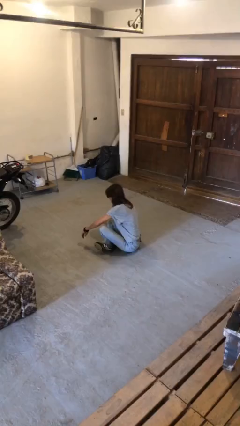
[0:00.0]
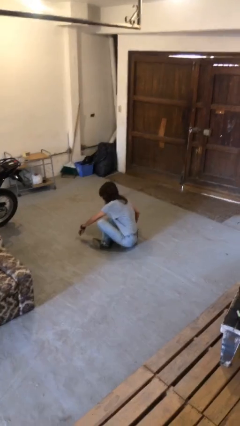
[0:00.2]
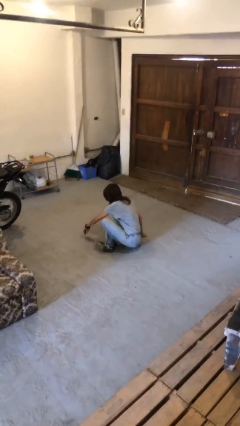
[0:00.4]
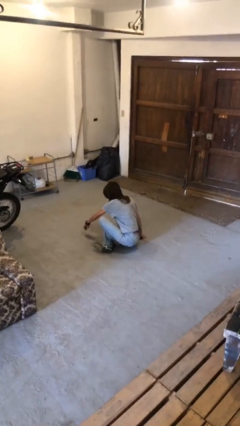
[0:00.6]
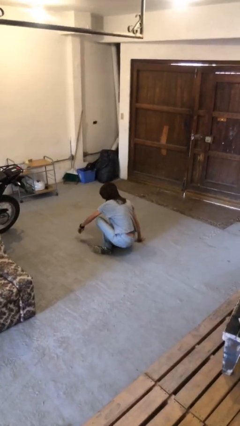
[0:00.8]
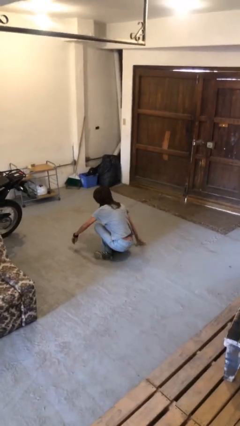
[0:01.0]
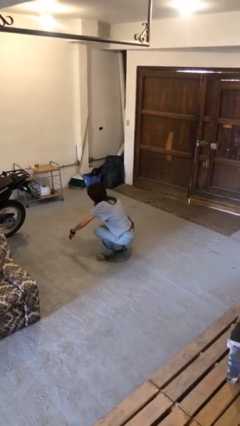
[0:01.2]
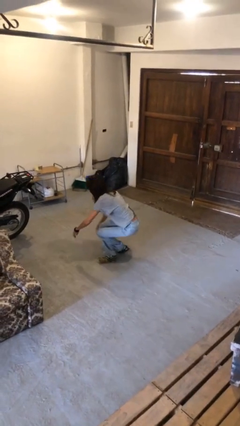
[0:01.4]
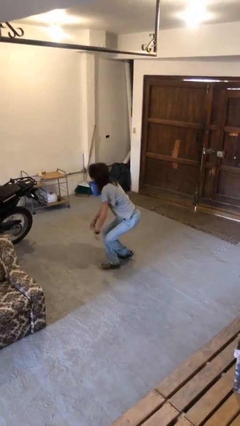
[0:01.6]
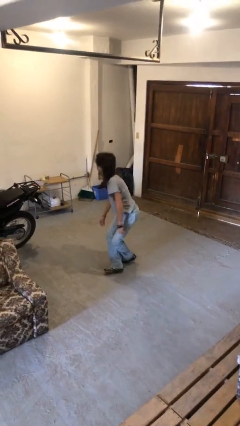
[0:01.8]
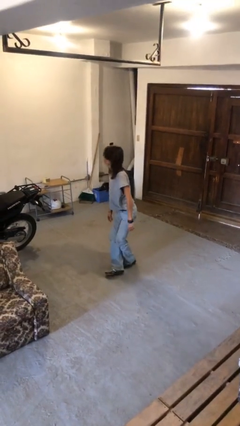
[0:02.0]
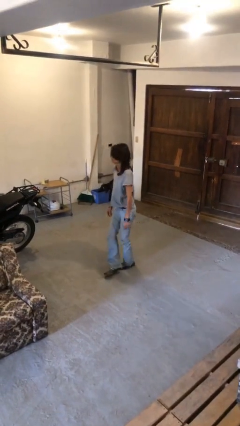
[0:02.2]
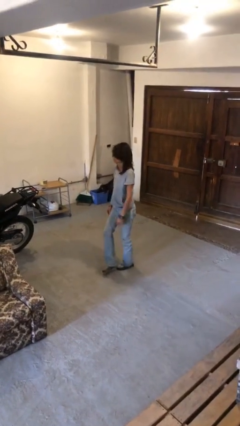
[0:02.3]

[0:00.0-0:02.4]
person stands up from floor

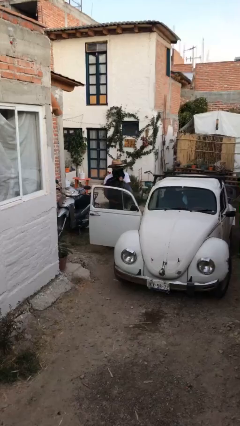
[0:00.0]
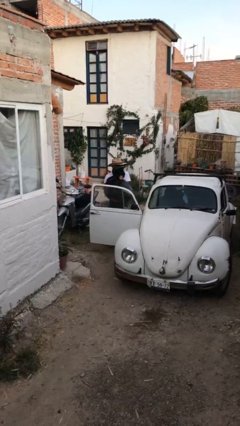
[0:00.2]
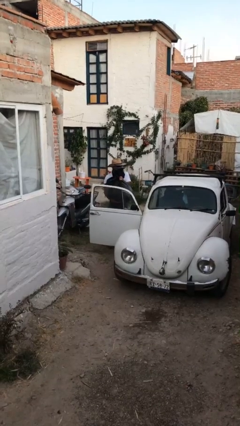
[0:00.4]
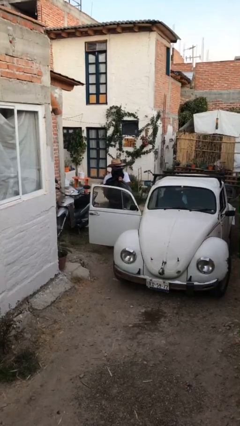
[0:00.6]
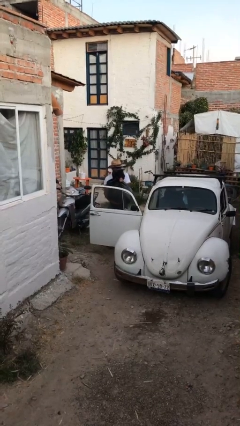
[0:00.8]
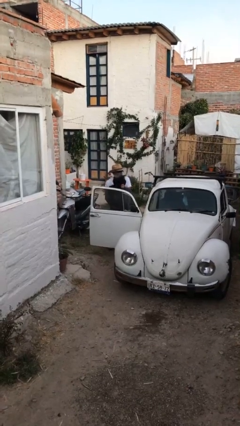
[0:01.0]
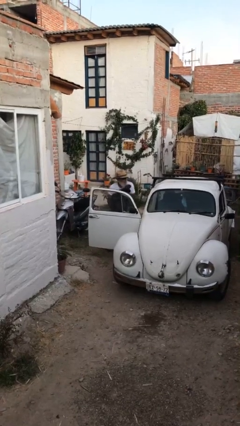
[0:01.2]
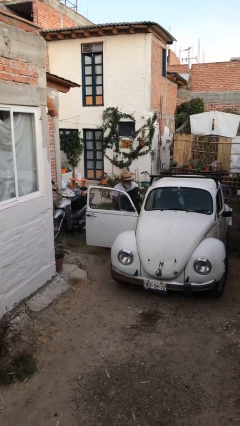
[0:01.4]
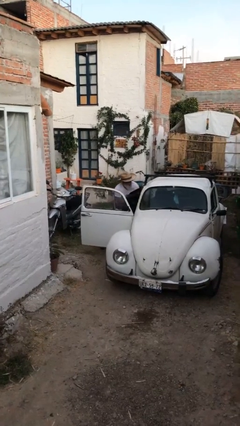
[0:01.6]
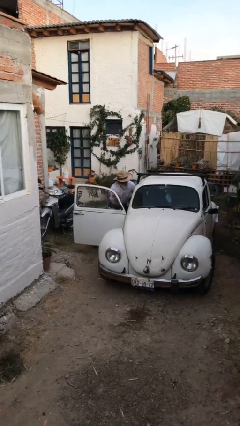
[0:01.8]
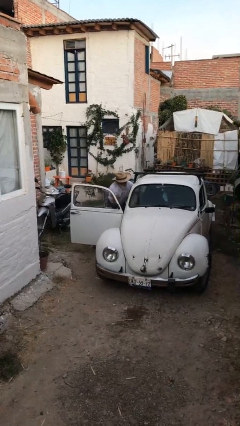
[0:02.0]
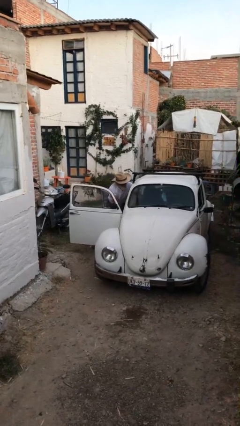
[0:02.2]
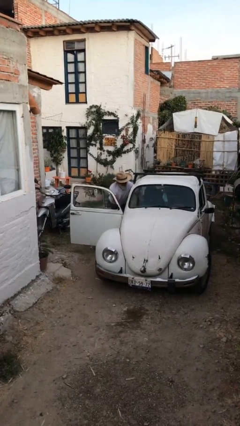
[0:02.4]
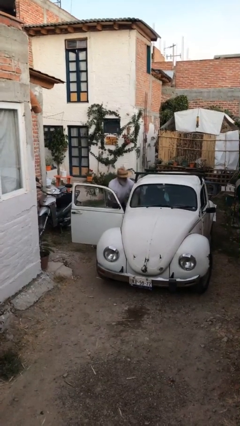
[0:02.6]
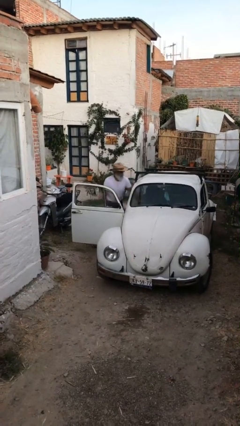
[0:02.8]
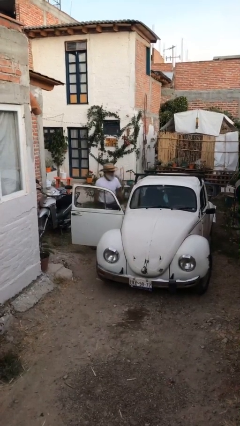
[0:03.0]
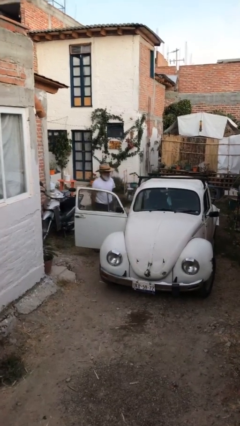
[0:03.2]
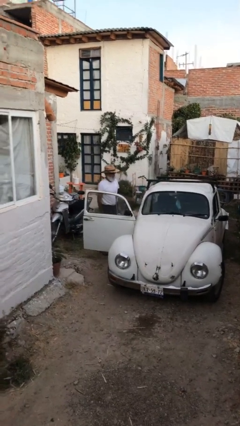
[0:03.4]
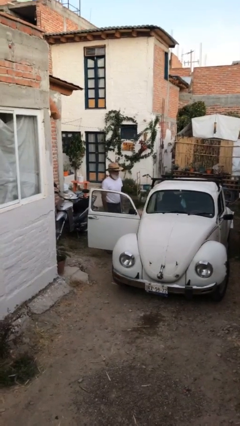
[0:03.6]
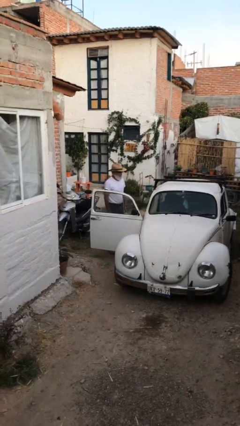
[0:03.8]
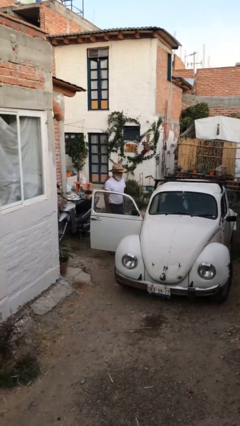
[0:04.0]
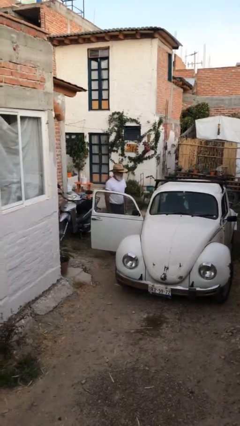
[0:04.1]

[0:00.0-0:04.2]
person loads car

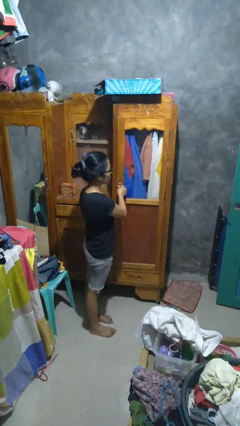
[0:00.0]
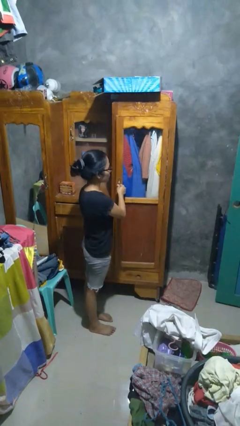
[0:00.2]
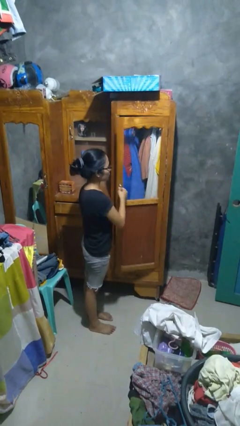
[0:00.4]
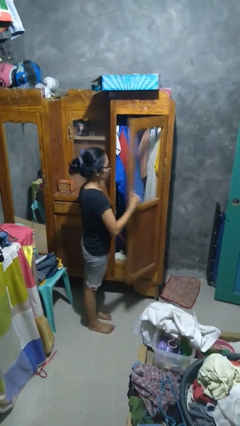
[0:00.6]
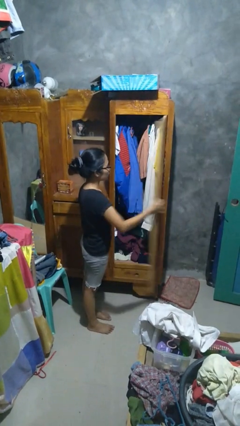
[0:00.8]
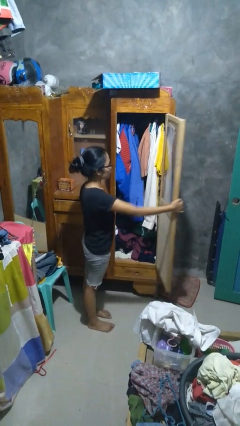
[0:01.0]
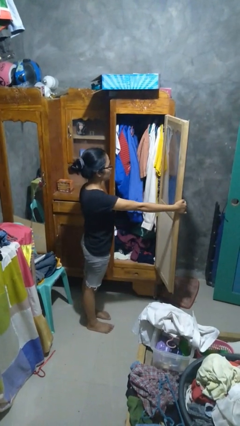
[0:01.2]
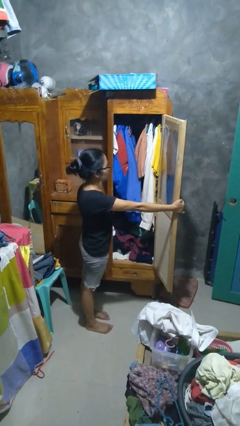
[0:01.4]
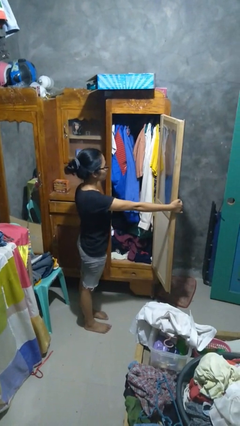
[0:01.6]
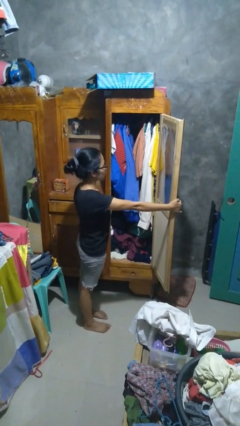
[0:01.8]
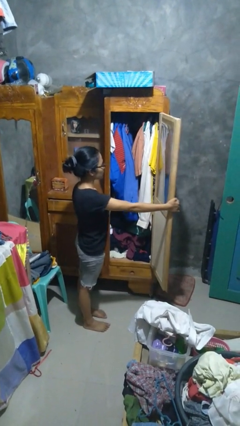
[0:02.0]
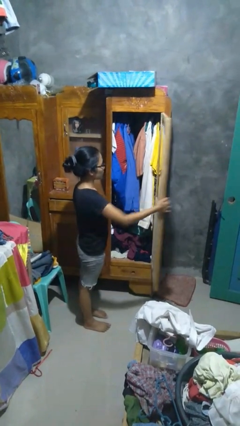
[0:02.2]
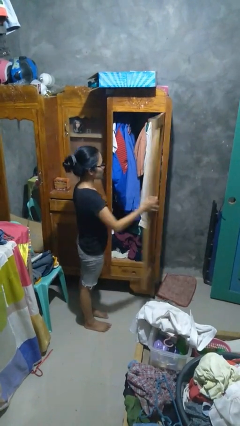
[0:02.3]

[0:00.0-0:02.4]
person opens closet door

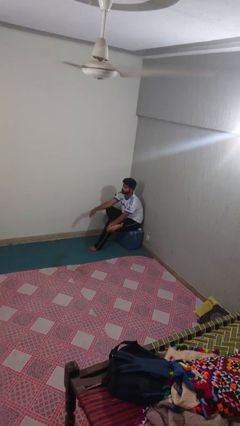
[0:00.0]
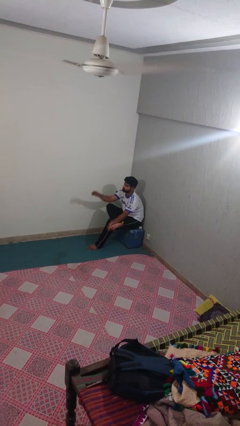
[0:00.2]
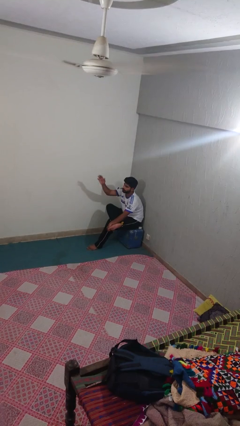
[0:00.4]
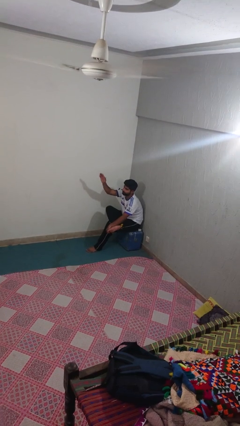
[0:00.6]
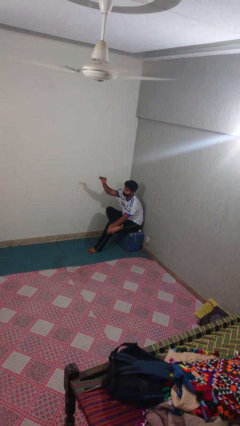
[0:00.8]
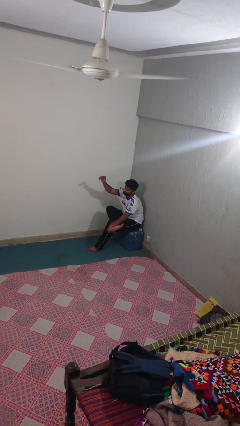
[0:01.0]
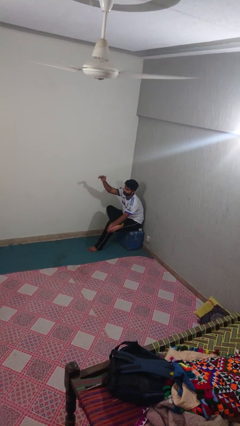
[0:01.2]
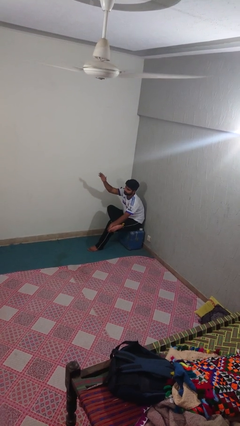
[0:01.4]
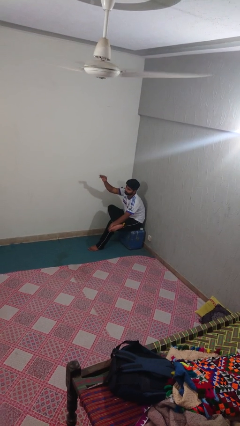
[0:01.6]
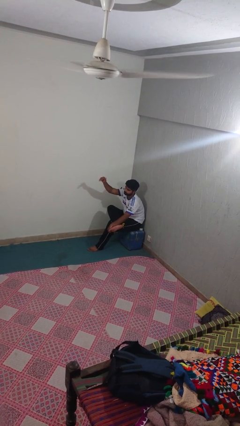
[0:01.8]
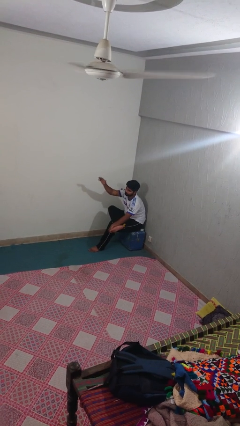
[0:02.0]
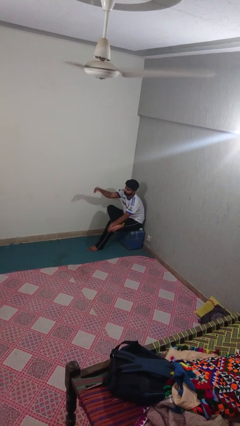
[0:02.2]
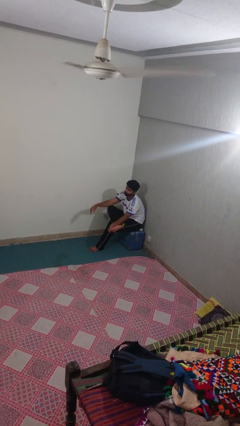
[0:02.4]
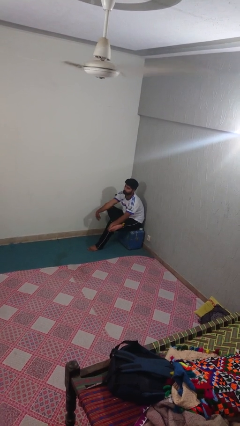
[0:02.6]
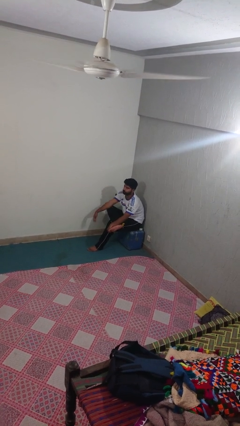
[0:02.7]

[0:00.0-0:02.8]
person gestures come here

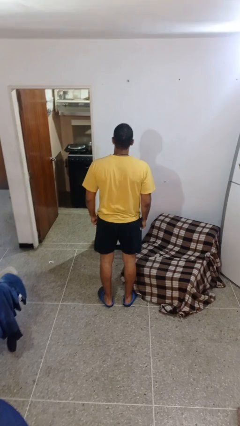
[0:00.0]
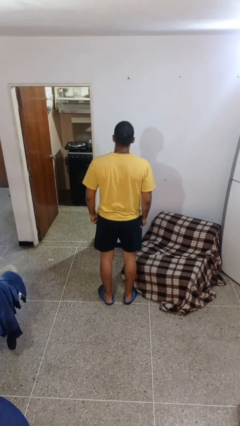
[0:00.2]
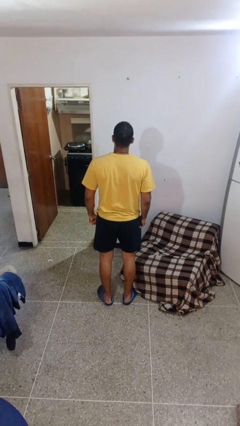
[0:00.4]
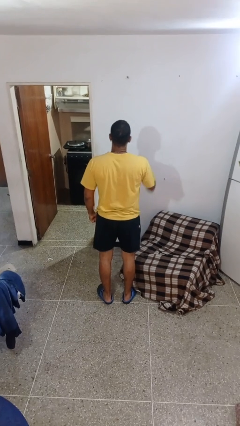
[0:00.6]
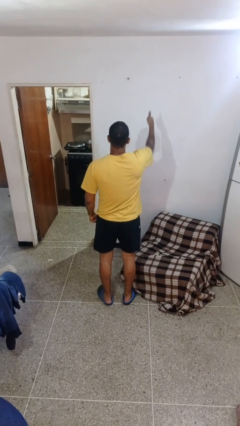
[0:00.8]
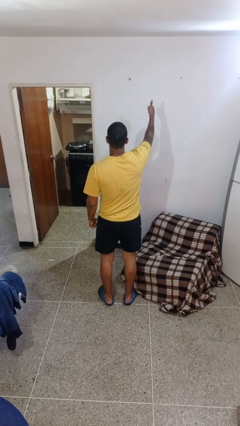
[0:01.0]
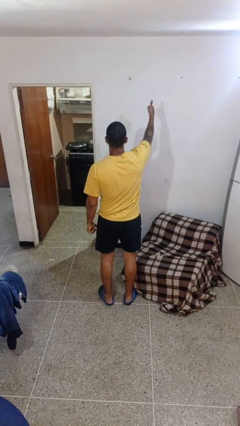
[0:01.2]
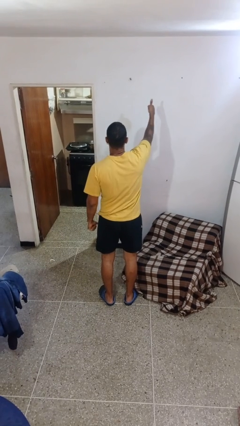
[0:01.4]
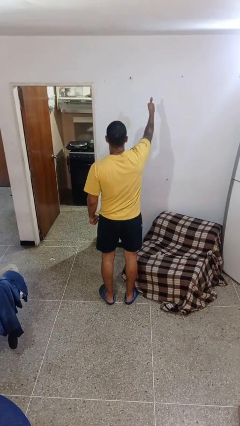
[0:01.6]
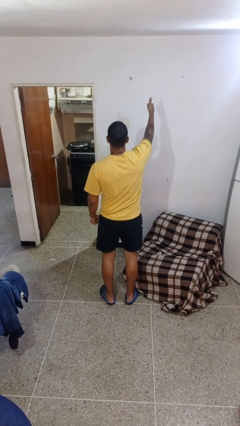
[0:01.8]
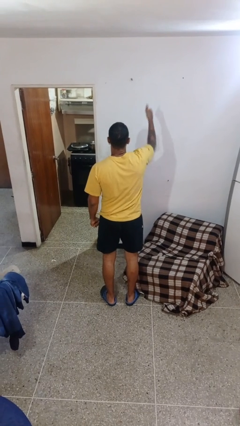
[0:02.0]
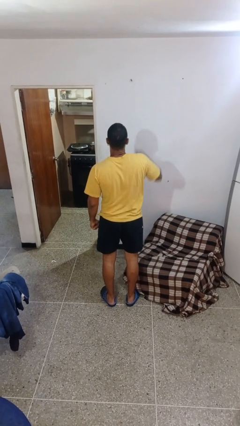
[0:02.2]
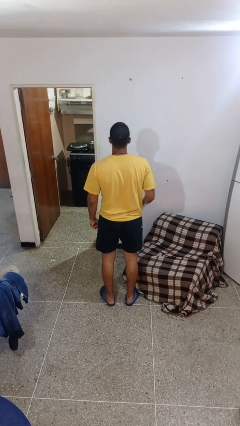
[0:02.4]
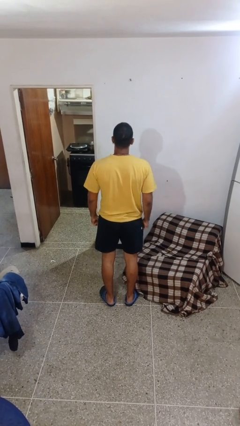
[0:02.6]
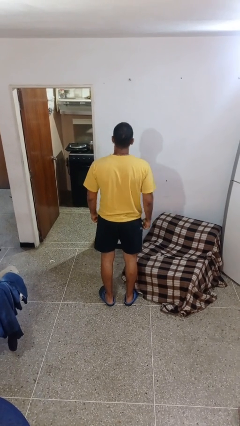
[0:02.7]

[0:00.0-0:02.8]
person gestures thumbs up

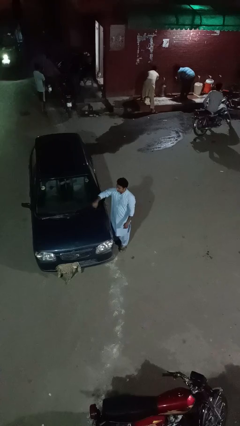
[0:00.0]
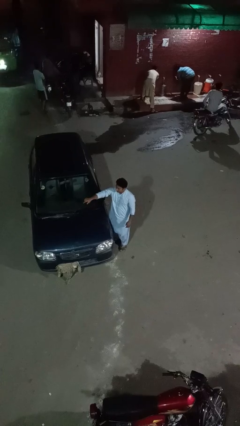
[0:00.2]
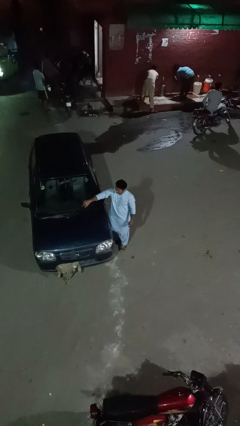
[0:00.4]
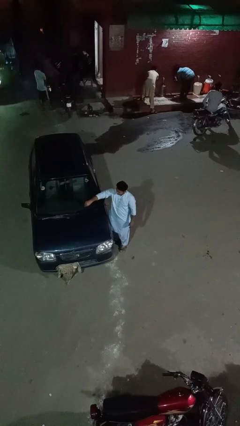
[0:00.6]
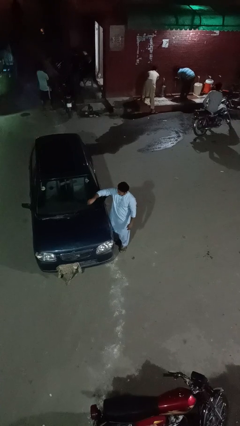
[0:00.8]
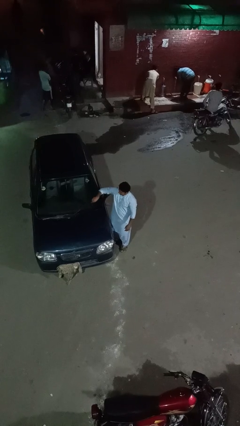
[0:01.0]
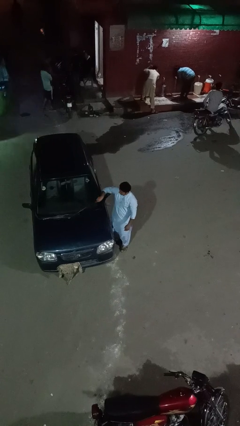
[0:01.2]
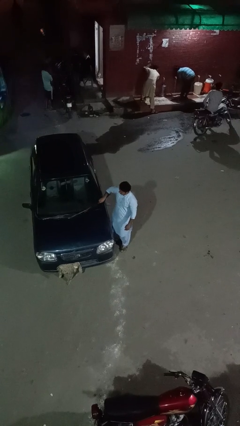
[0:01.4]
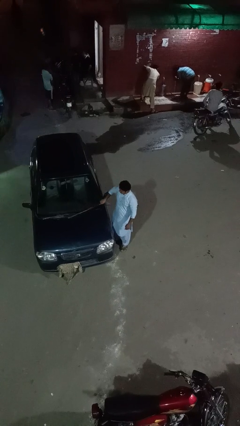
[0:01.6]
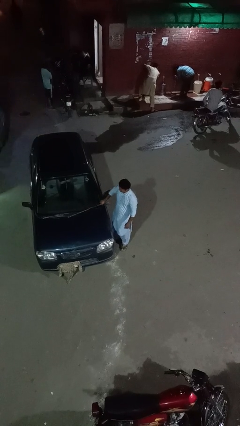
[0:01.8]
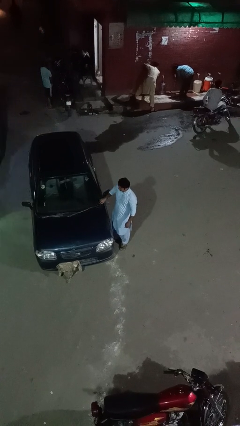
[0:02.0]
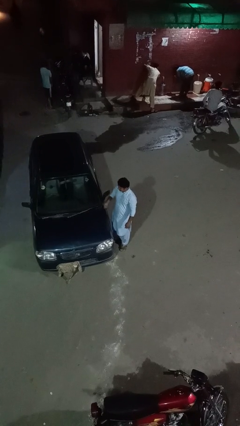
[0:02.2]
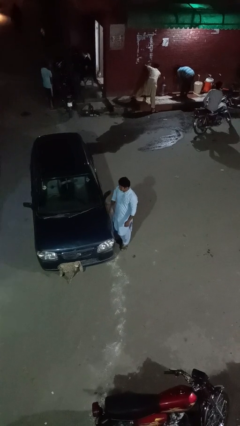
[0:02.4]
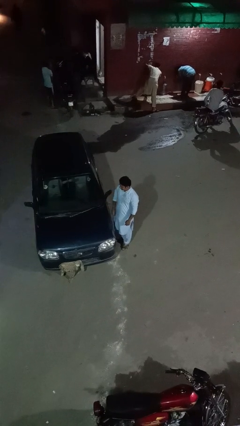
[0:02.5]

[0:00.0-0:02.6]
person flips down car wipers

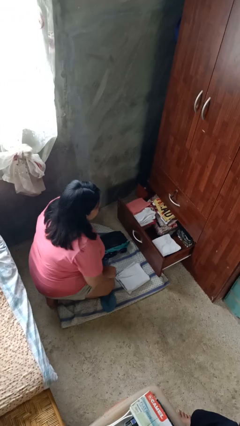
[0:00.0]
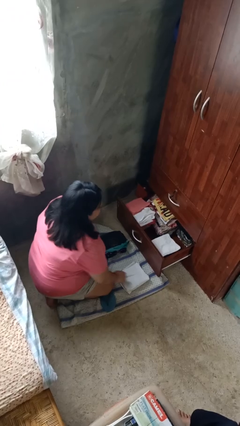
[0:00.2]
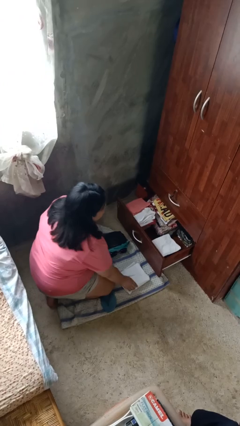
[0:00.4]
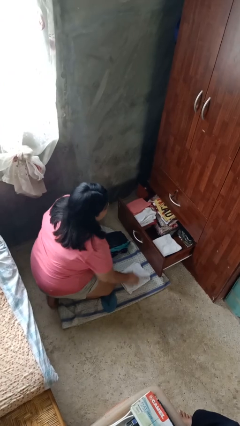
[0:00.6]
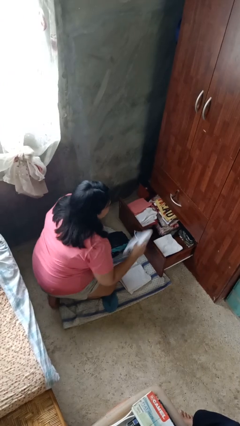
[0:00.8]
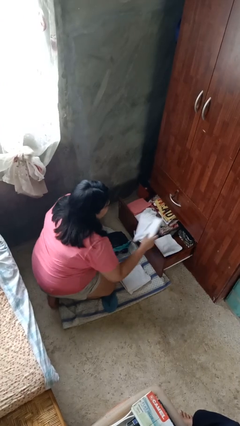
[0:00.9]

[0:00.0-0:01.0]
person puts clothes into dresser
